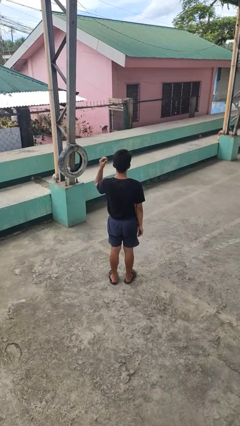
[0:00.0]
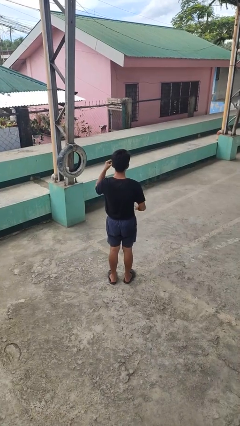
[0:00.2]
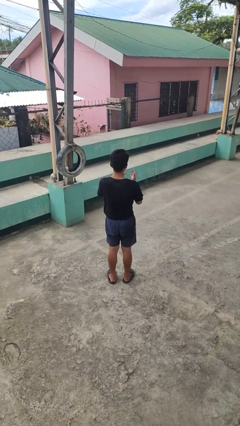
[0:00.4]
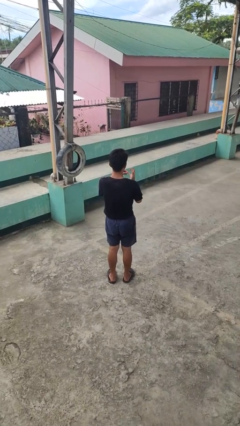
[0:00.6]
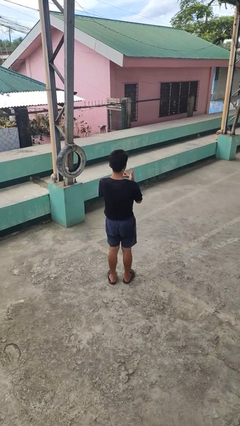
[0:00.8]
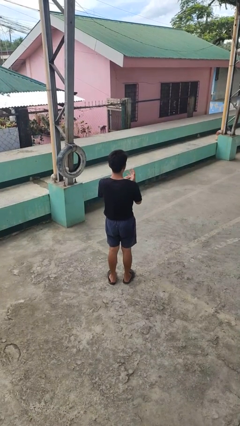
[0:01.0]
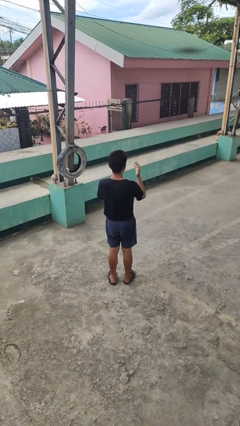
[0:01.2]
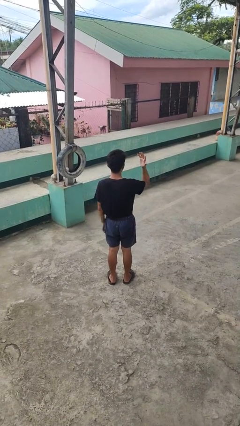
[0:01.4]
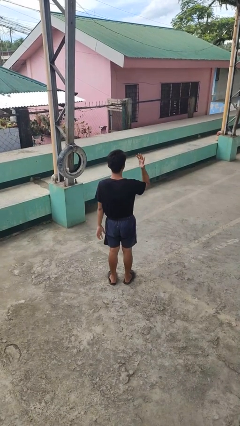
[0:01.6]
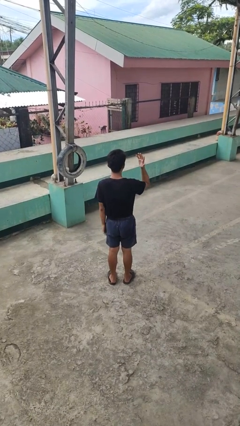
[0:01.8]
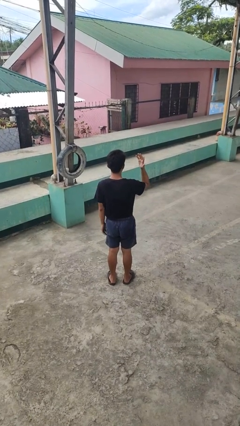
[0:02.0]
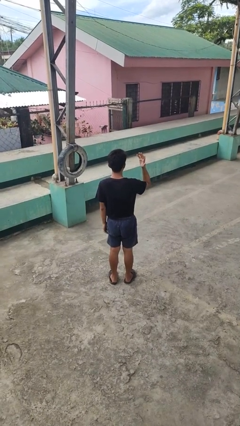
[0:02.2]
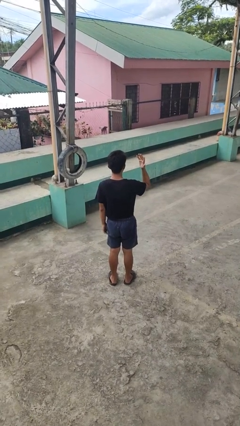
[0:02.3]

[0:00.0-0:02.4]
person puts on ring

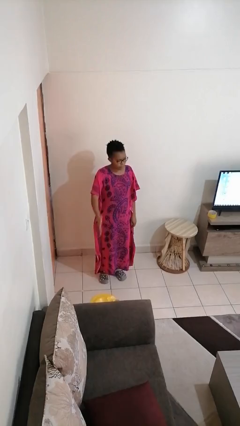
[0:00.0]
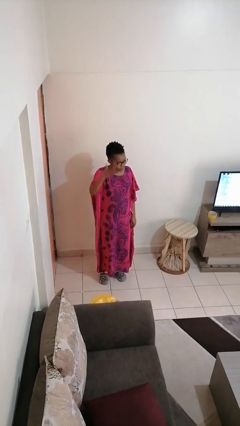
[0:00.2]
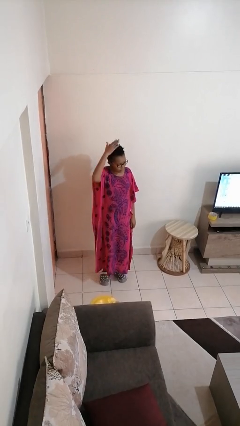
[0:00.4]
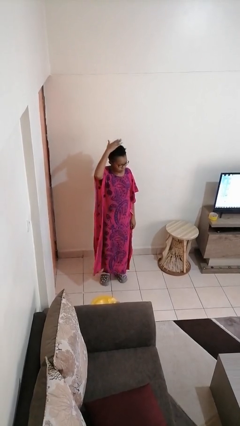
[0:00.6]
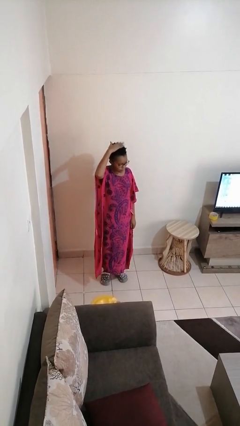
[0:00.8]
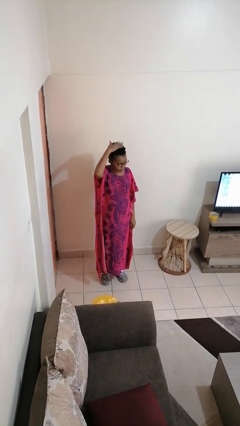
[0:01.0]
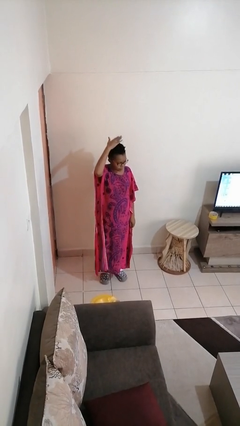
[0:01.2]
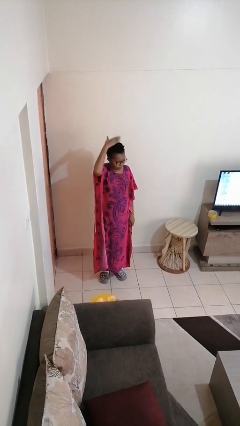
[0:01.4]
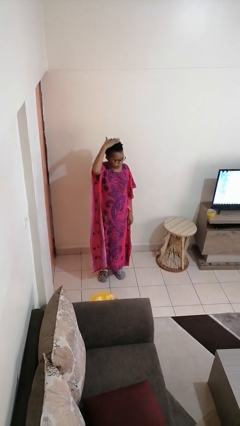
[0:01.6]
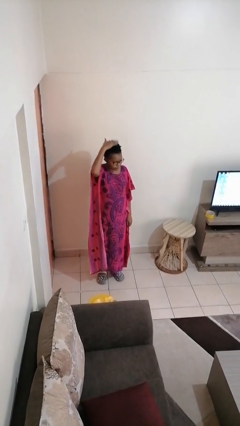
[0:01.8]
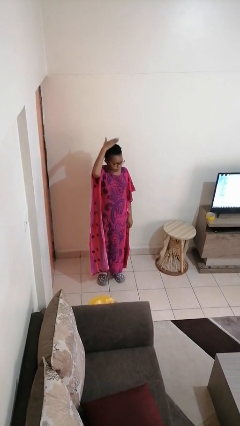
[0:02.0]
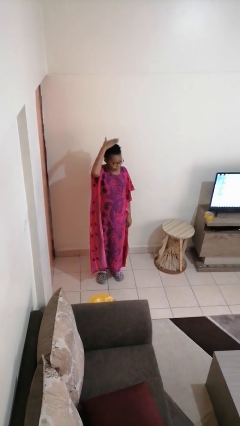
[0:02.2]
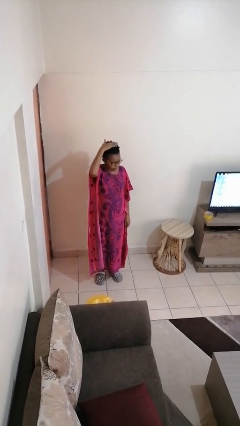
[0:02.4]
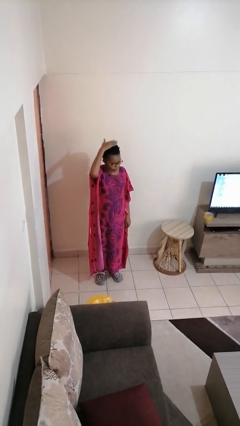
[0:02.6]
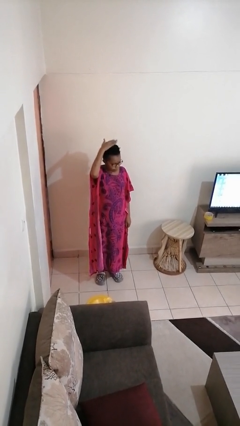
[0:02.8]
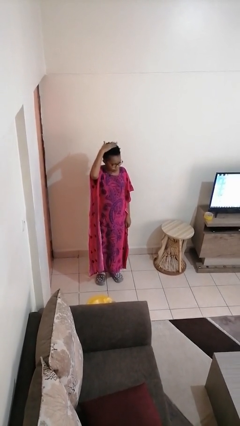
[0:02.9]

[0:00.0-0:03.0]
person pats head

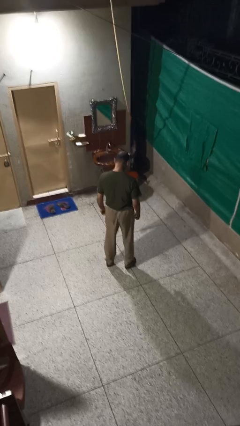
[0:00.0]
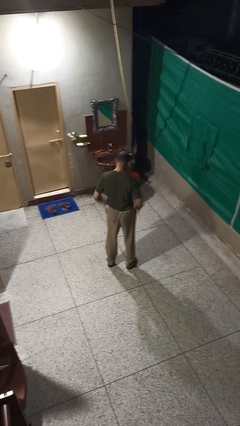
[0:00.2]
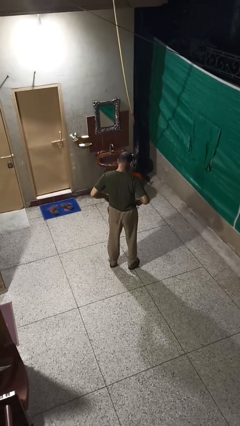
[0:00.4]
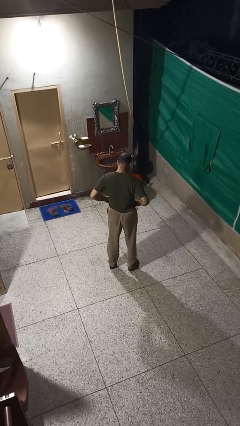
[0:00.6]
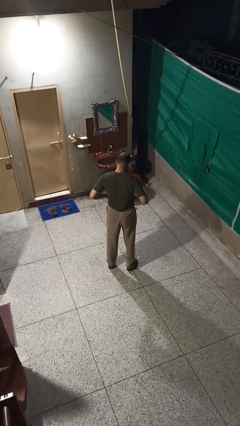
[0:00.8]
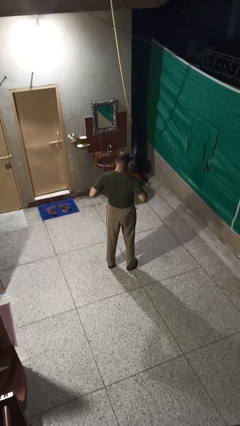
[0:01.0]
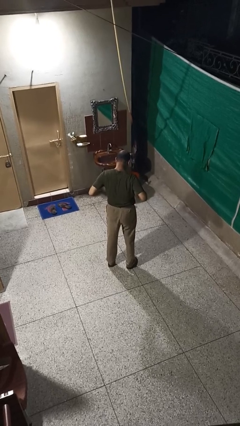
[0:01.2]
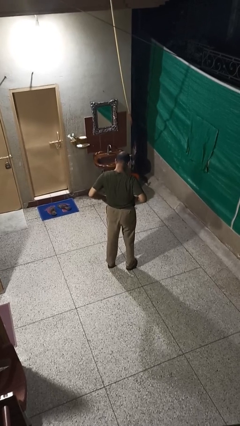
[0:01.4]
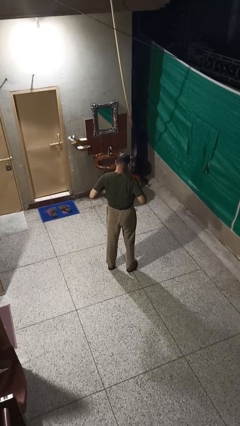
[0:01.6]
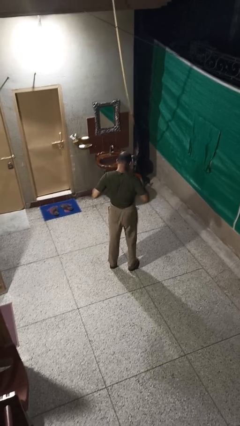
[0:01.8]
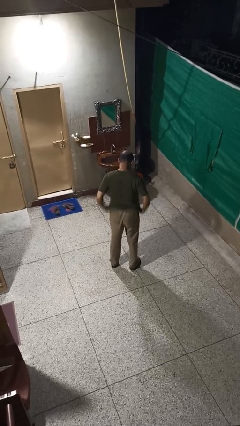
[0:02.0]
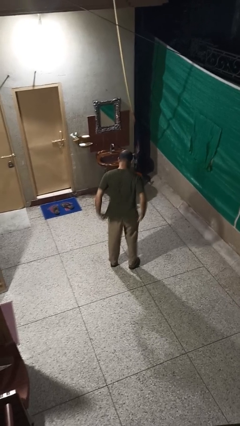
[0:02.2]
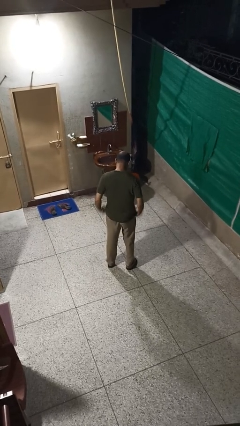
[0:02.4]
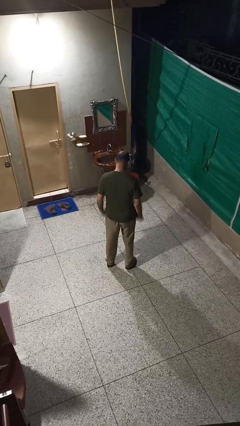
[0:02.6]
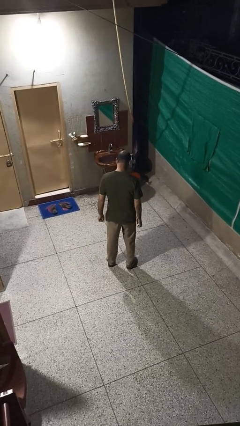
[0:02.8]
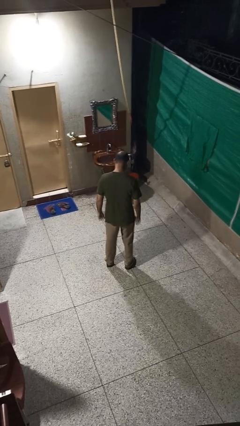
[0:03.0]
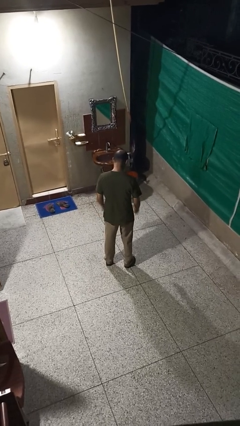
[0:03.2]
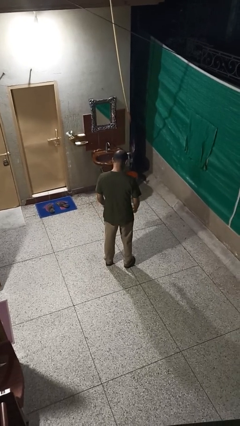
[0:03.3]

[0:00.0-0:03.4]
person untucks shirt

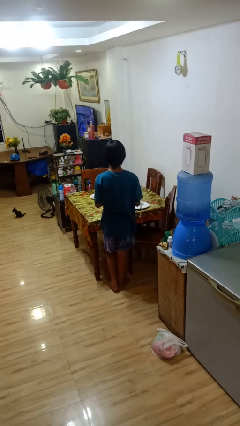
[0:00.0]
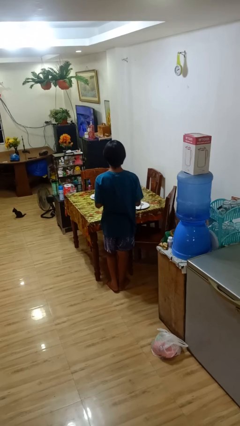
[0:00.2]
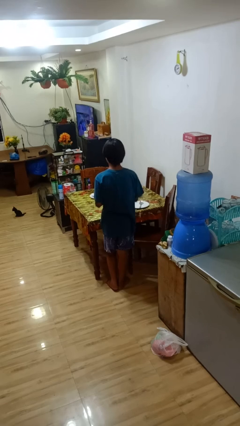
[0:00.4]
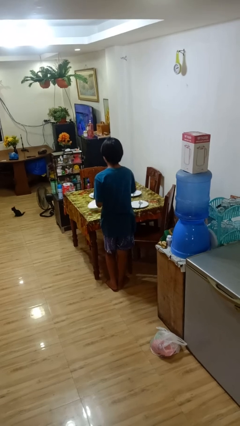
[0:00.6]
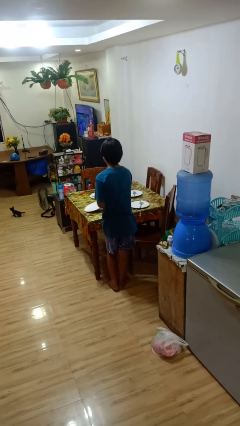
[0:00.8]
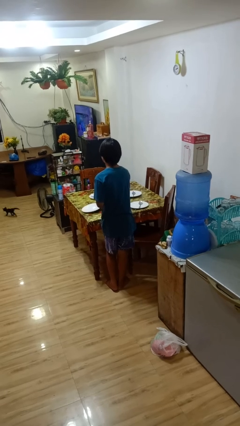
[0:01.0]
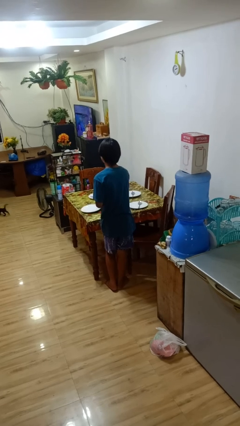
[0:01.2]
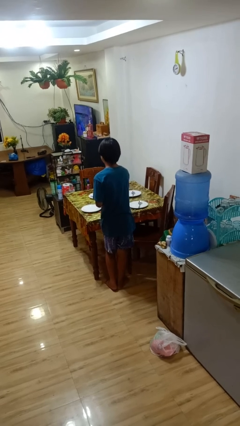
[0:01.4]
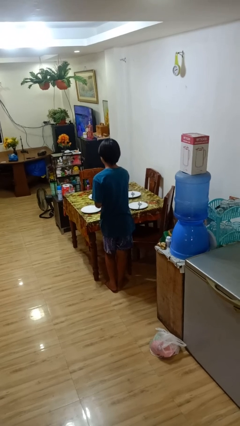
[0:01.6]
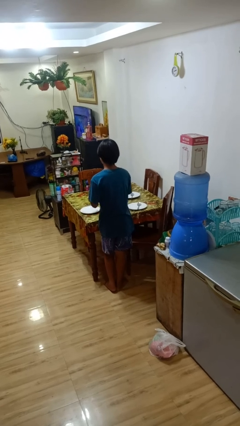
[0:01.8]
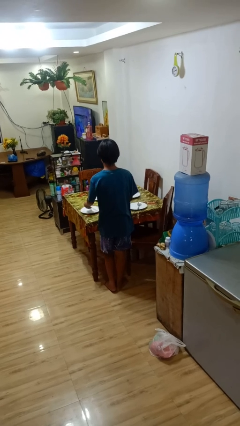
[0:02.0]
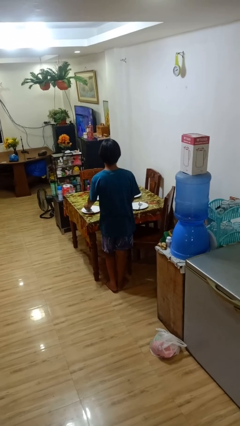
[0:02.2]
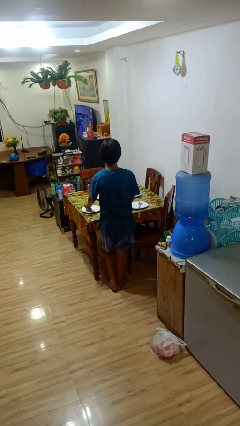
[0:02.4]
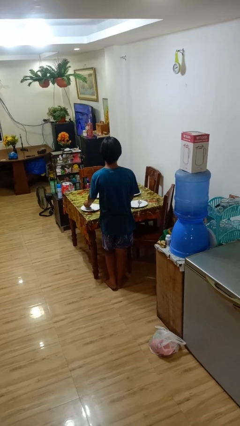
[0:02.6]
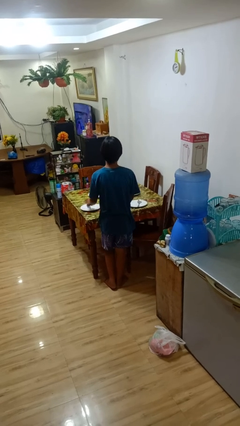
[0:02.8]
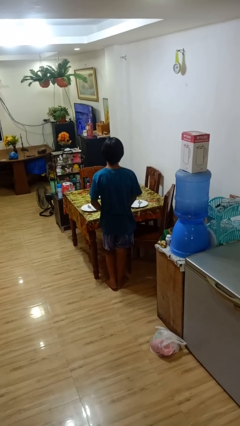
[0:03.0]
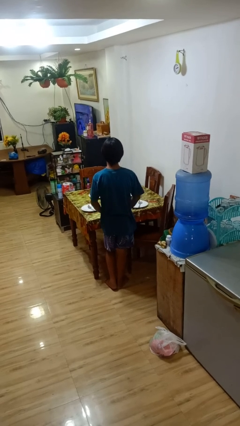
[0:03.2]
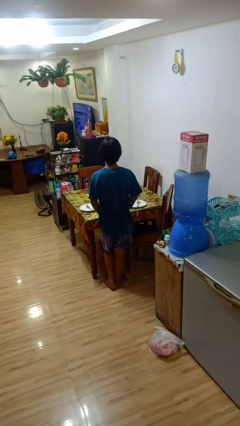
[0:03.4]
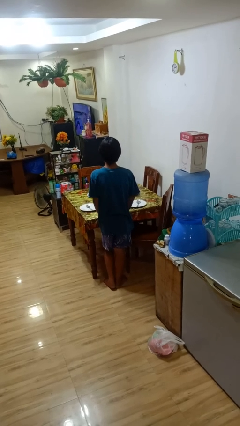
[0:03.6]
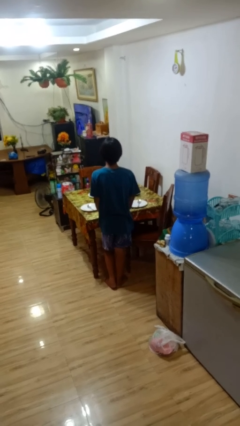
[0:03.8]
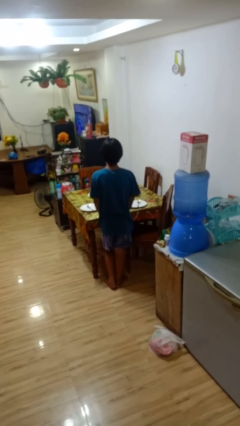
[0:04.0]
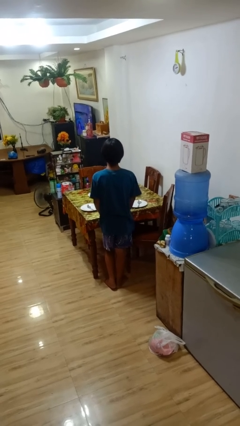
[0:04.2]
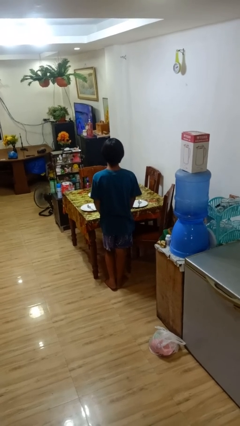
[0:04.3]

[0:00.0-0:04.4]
person sets table

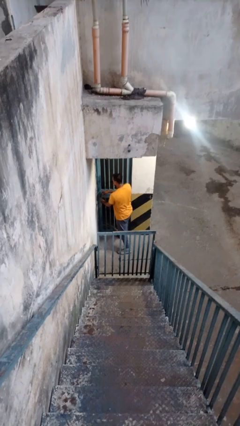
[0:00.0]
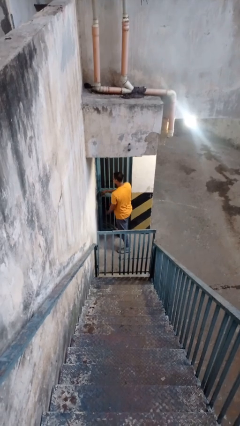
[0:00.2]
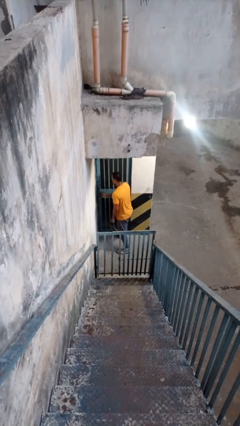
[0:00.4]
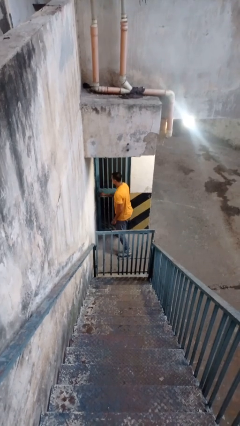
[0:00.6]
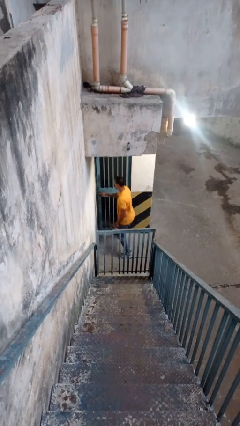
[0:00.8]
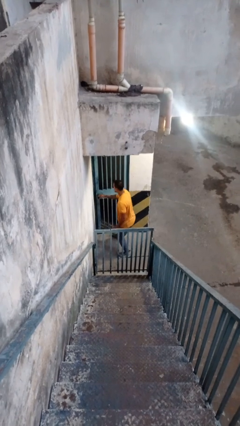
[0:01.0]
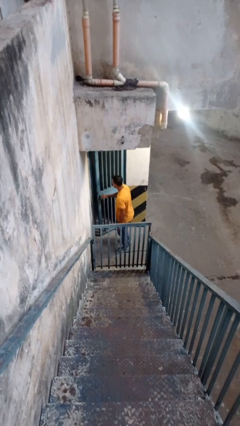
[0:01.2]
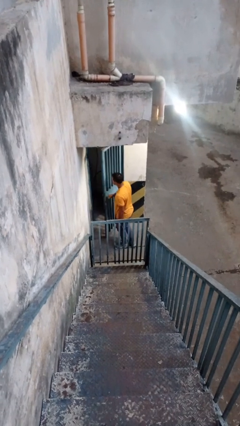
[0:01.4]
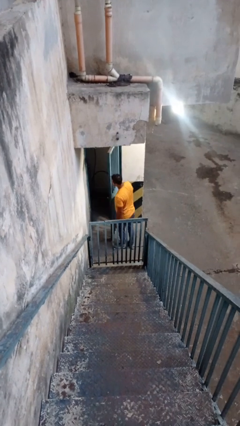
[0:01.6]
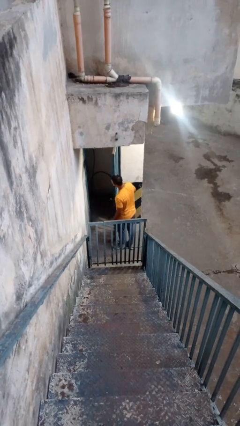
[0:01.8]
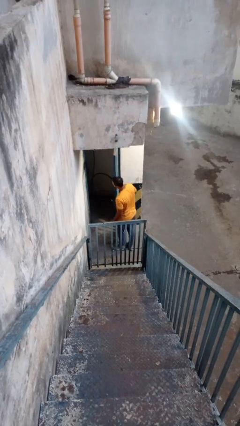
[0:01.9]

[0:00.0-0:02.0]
person opens facility door

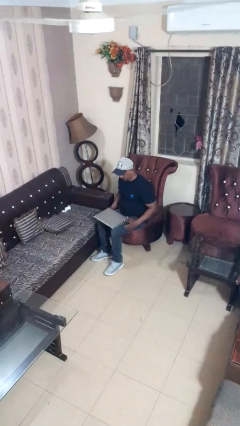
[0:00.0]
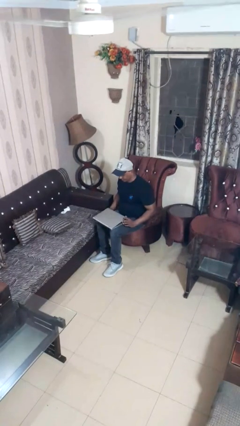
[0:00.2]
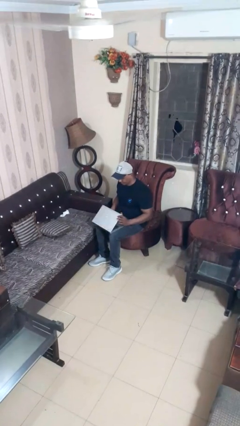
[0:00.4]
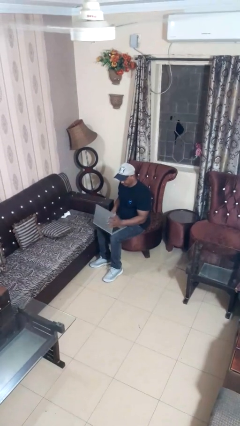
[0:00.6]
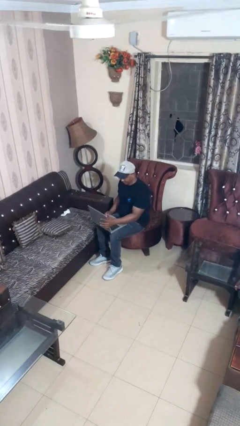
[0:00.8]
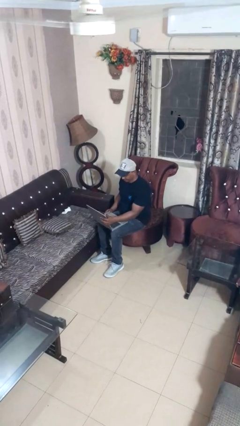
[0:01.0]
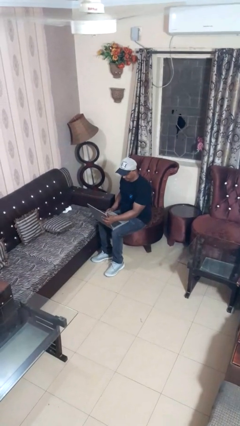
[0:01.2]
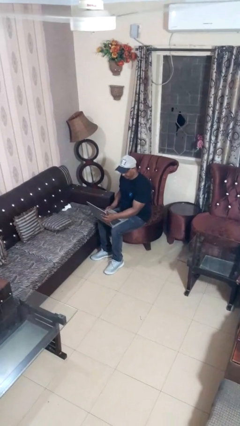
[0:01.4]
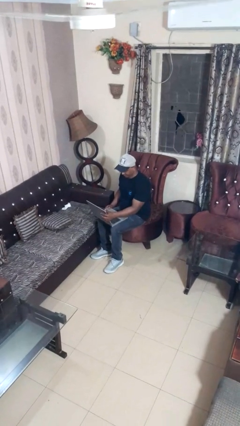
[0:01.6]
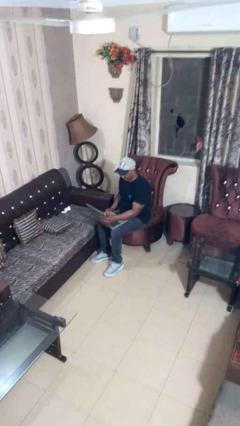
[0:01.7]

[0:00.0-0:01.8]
person opens laptop

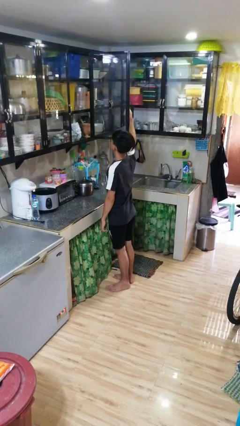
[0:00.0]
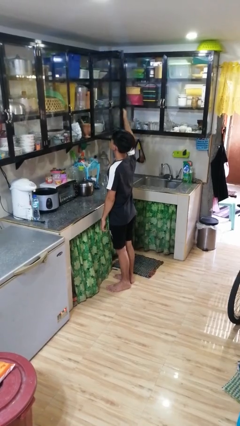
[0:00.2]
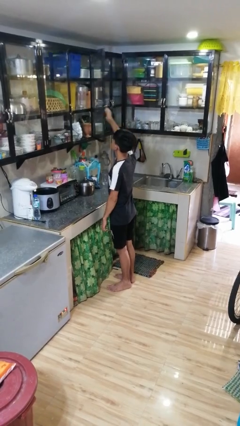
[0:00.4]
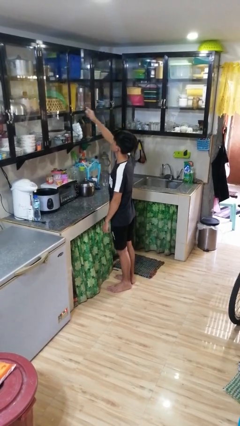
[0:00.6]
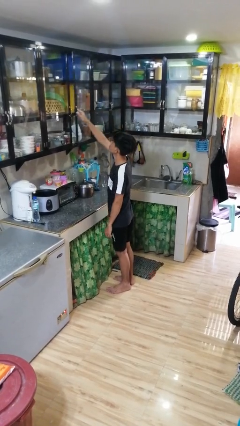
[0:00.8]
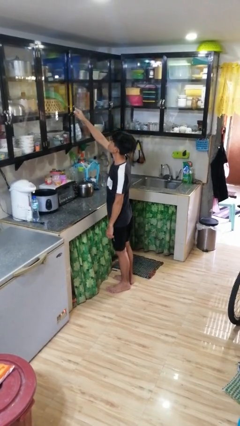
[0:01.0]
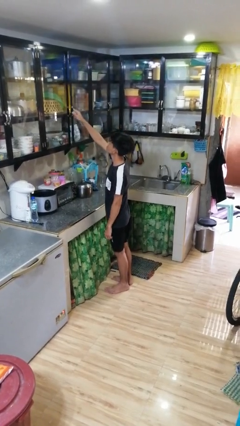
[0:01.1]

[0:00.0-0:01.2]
person closes cabinet
